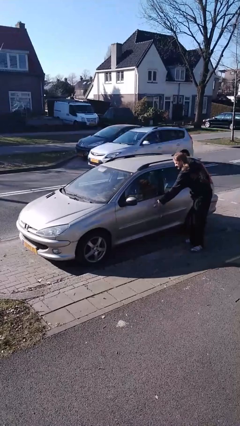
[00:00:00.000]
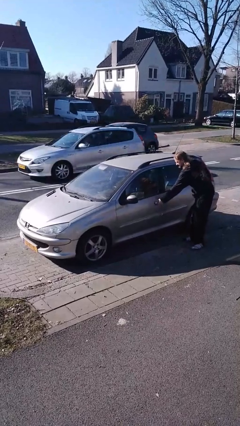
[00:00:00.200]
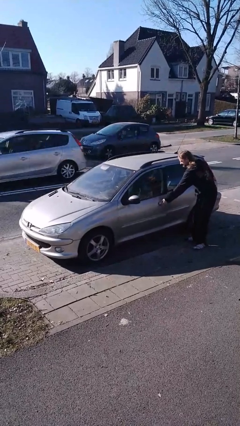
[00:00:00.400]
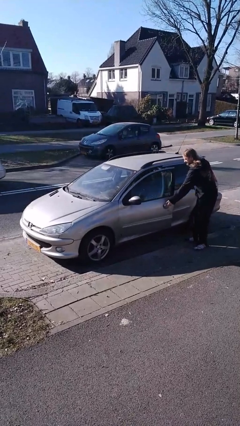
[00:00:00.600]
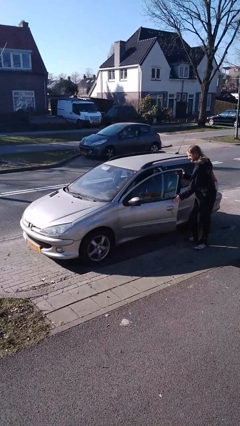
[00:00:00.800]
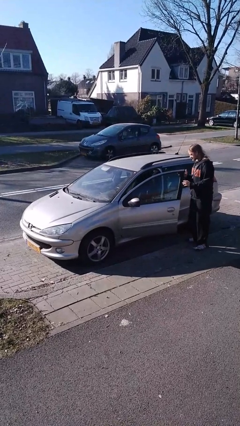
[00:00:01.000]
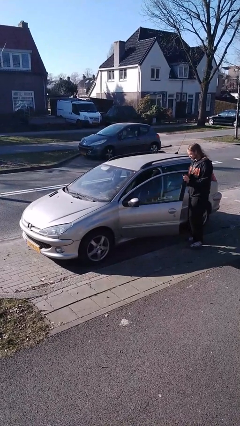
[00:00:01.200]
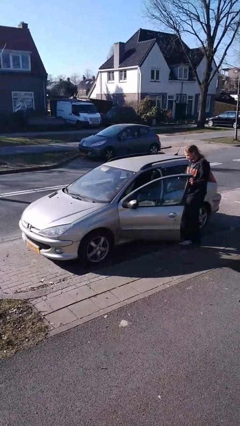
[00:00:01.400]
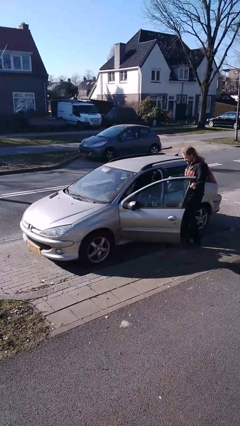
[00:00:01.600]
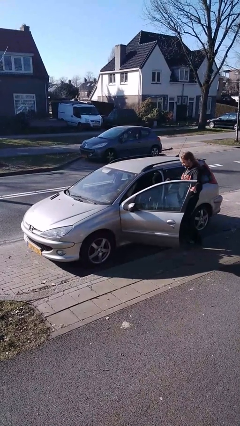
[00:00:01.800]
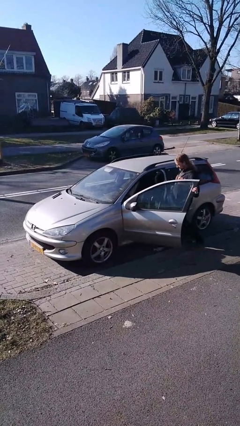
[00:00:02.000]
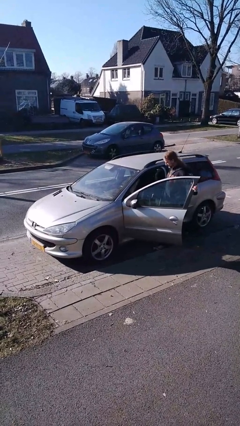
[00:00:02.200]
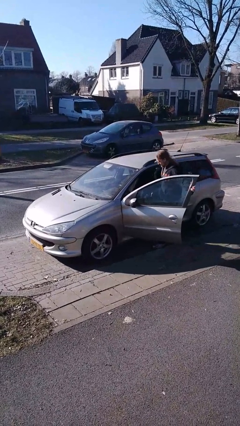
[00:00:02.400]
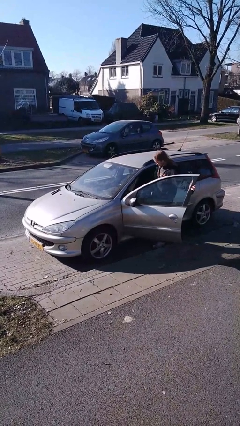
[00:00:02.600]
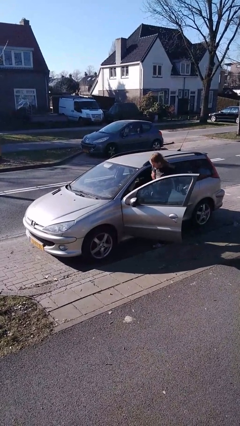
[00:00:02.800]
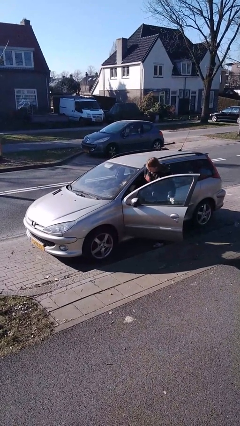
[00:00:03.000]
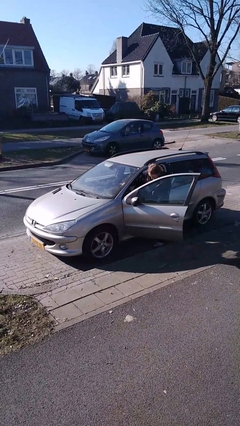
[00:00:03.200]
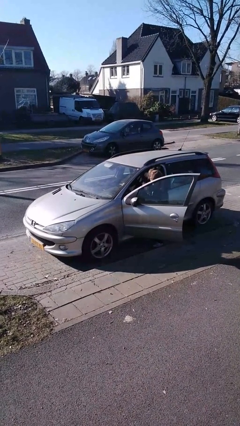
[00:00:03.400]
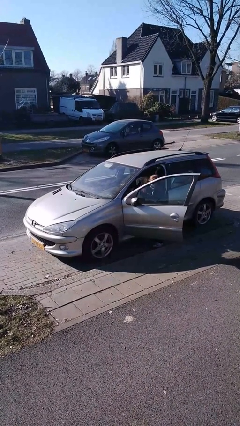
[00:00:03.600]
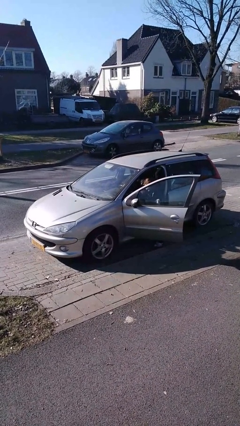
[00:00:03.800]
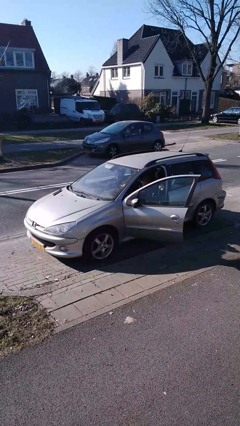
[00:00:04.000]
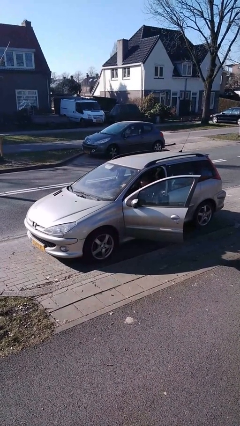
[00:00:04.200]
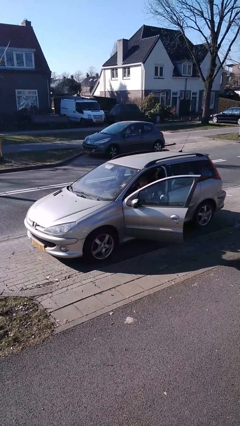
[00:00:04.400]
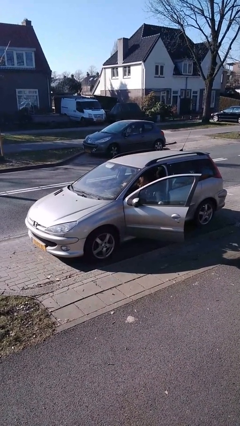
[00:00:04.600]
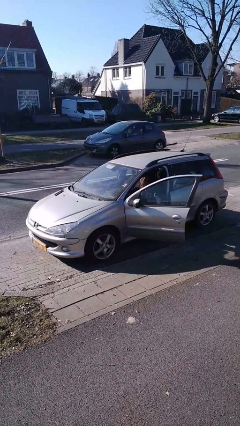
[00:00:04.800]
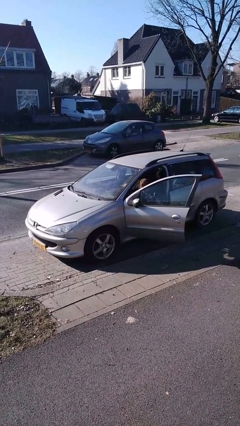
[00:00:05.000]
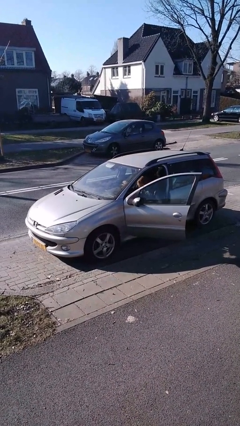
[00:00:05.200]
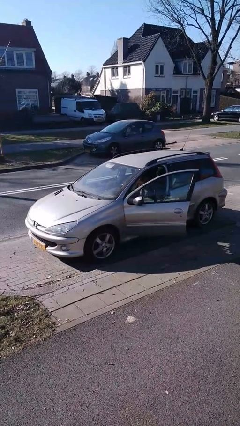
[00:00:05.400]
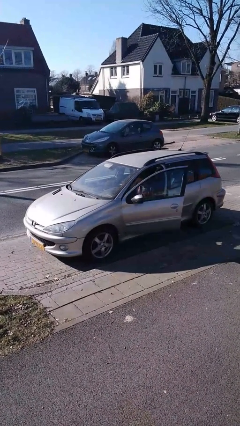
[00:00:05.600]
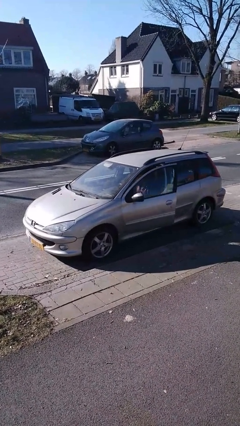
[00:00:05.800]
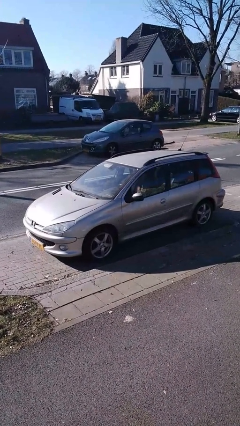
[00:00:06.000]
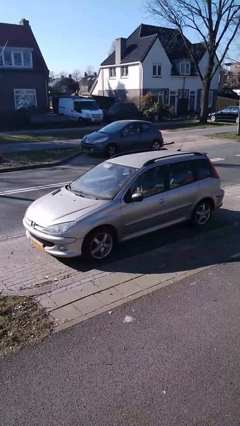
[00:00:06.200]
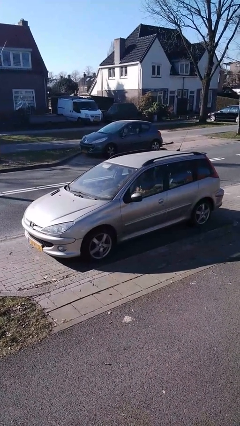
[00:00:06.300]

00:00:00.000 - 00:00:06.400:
car picks up person

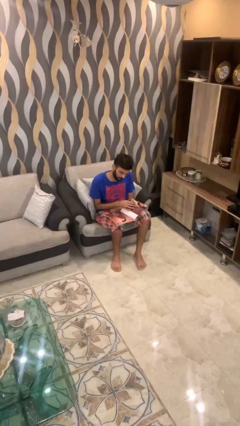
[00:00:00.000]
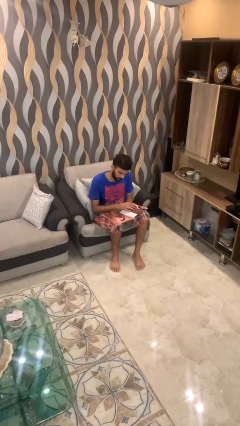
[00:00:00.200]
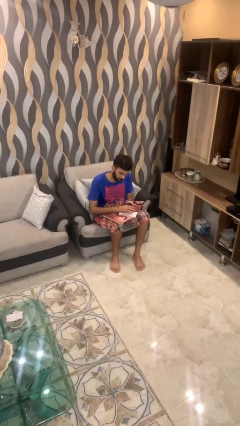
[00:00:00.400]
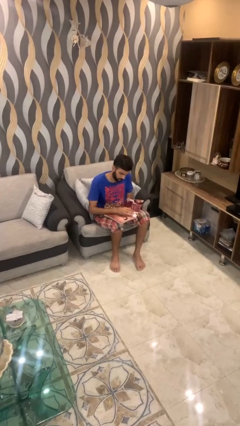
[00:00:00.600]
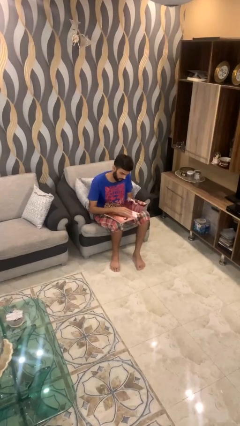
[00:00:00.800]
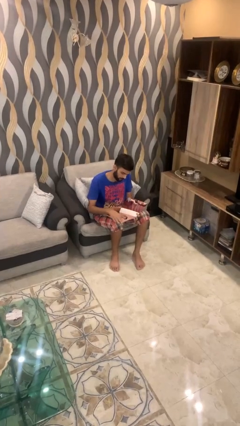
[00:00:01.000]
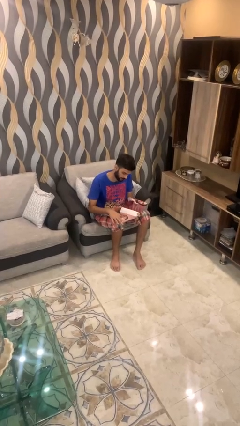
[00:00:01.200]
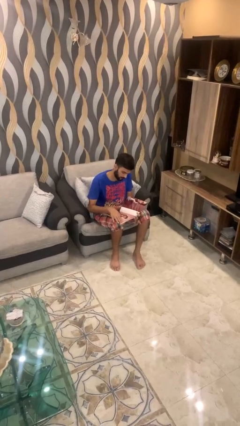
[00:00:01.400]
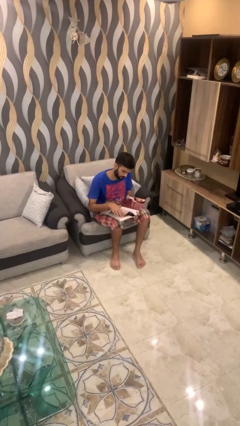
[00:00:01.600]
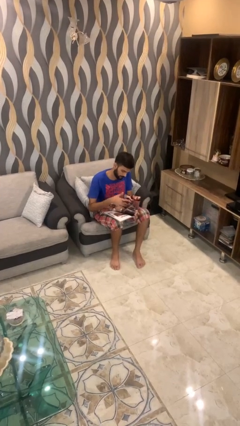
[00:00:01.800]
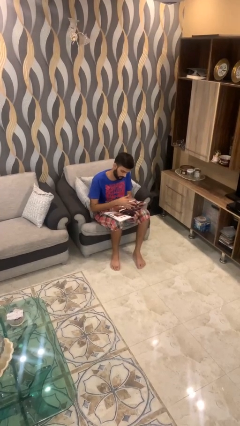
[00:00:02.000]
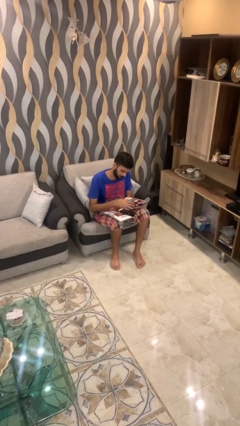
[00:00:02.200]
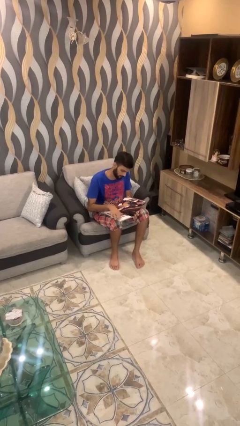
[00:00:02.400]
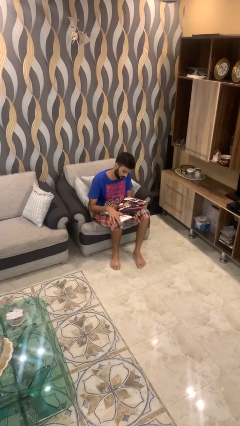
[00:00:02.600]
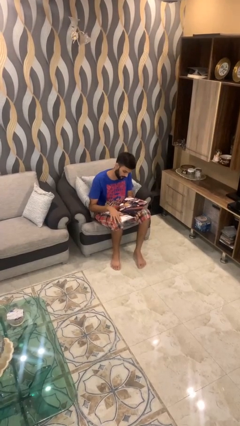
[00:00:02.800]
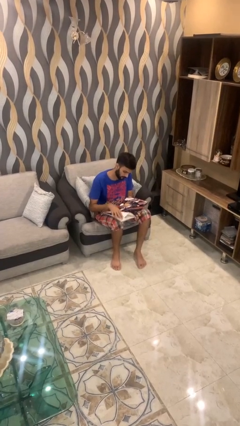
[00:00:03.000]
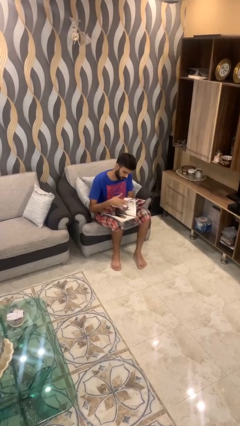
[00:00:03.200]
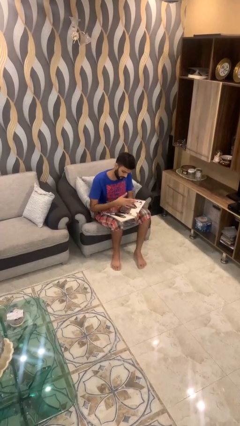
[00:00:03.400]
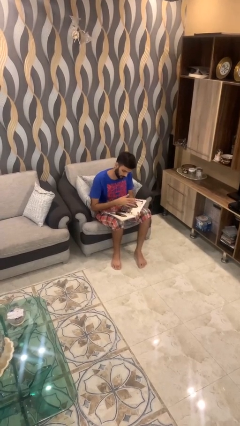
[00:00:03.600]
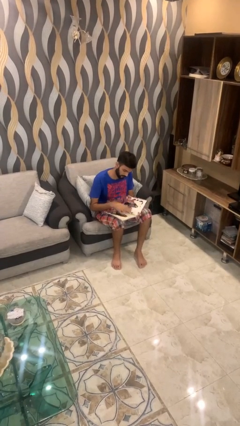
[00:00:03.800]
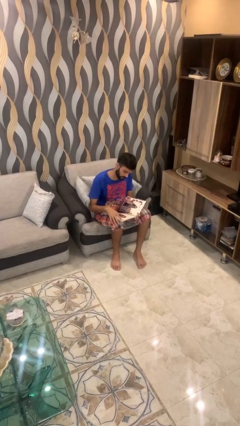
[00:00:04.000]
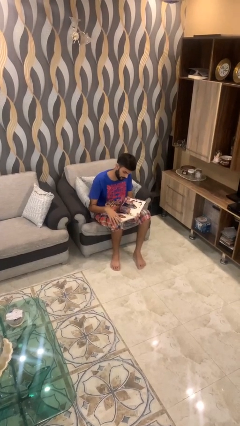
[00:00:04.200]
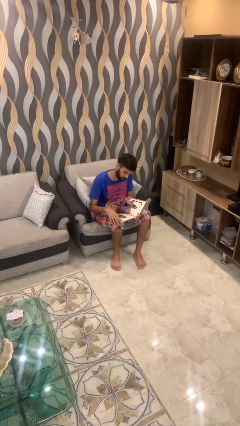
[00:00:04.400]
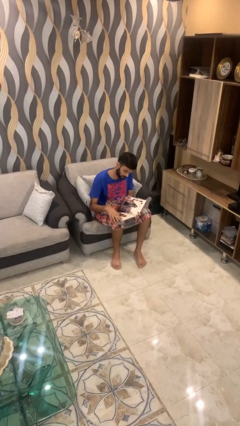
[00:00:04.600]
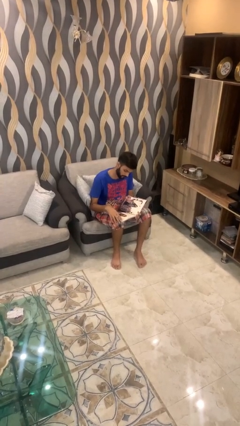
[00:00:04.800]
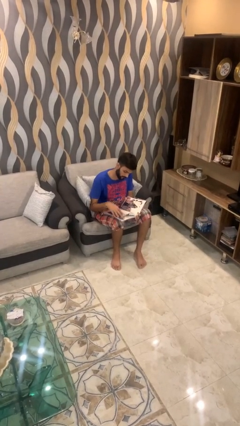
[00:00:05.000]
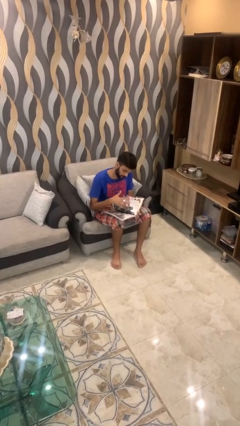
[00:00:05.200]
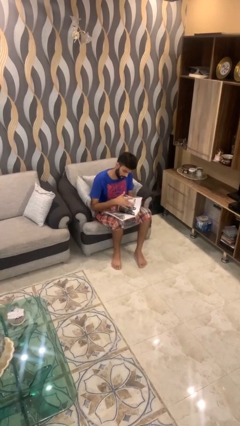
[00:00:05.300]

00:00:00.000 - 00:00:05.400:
person reads document

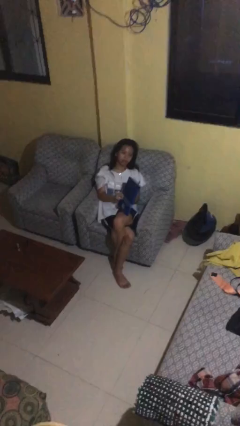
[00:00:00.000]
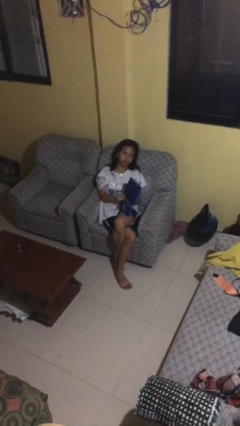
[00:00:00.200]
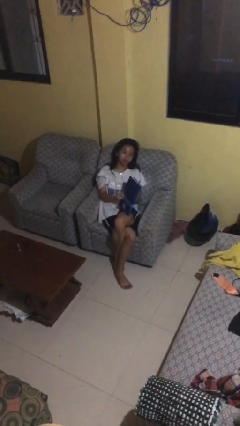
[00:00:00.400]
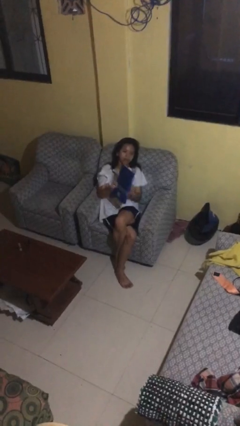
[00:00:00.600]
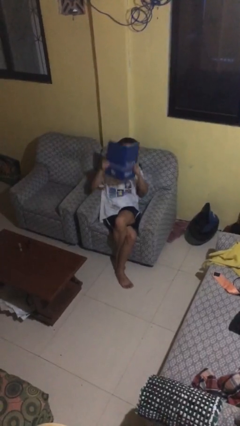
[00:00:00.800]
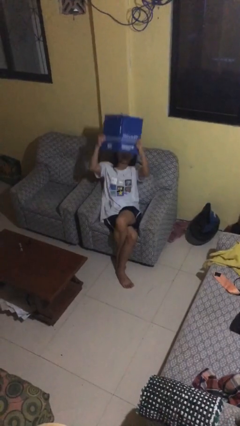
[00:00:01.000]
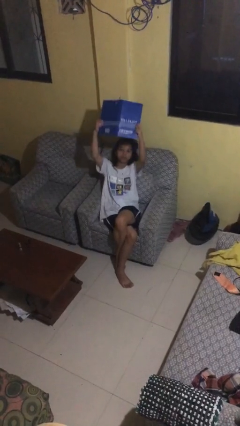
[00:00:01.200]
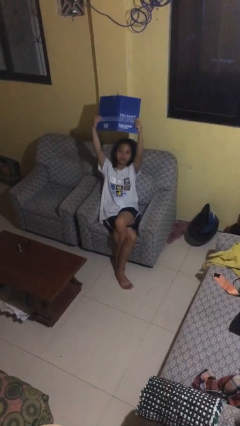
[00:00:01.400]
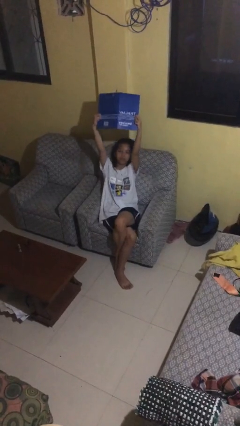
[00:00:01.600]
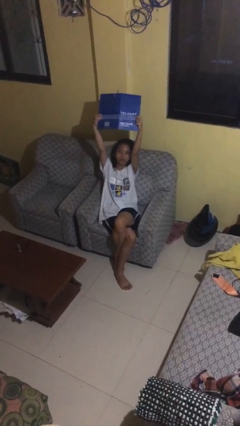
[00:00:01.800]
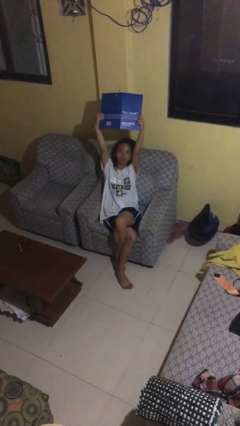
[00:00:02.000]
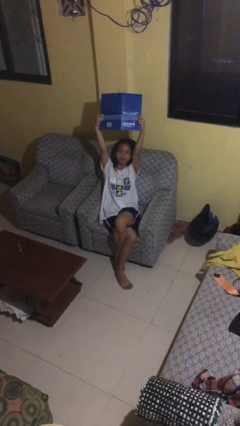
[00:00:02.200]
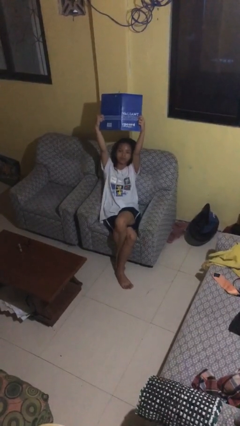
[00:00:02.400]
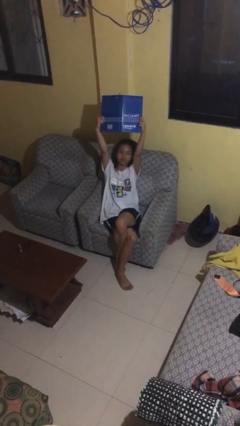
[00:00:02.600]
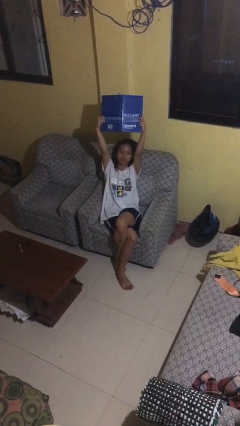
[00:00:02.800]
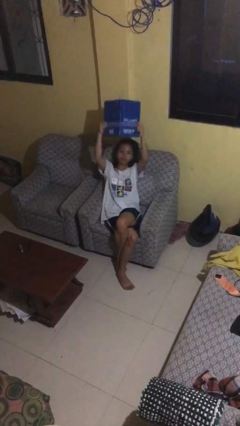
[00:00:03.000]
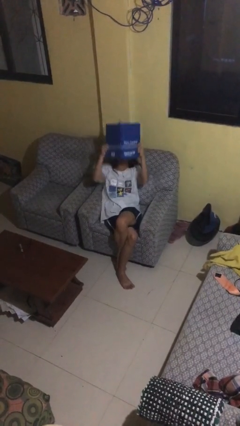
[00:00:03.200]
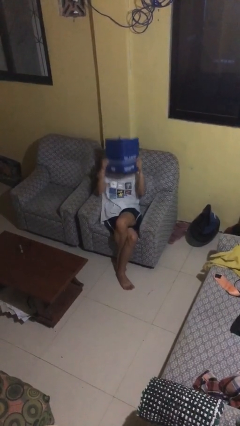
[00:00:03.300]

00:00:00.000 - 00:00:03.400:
person holds object above head

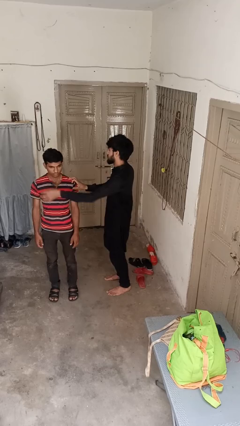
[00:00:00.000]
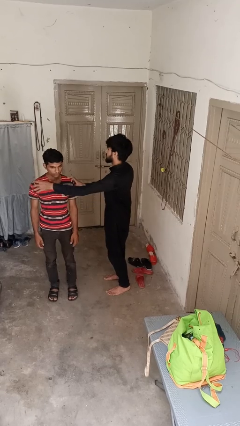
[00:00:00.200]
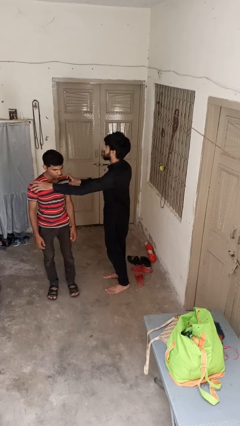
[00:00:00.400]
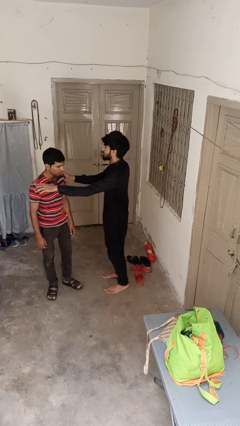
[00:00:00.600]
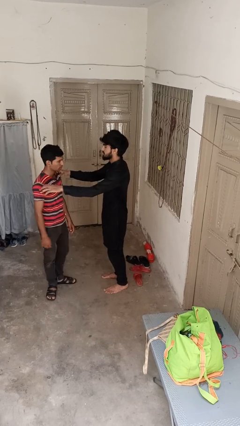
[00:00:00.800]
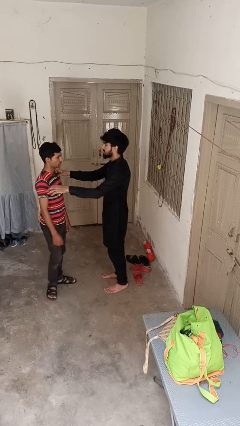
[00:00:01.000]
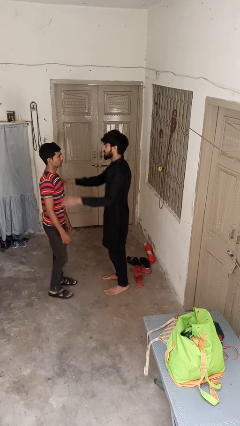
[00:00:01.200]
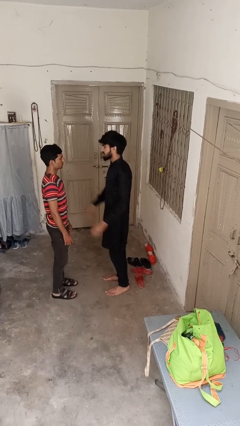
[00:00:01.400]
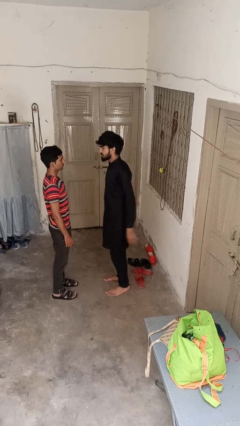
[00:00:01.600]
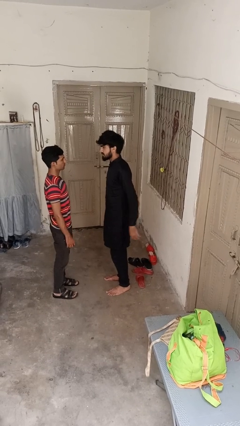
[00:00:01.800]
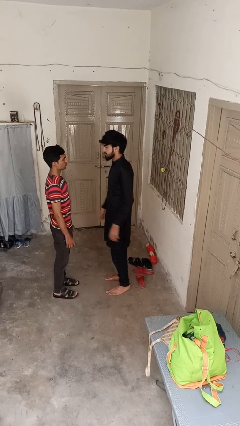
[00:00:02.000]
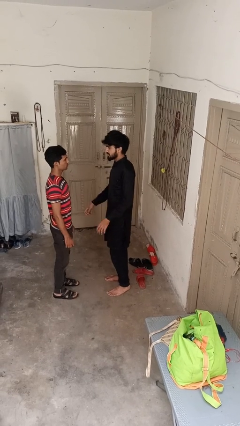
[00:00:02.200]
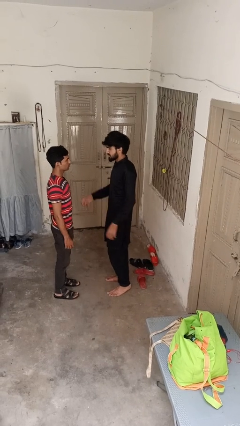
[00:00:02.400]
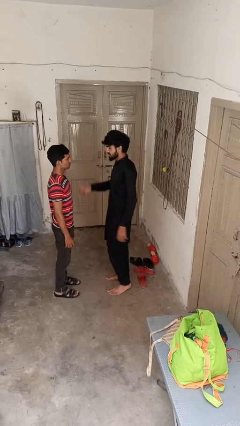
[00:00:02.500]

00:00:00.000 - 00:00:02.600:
person spins person around
